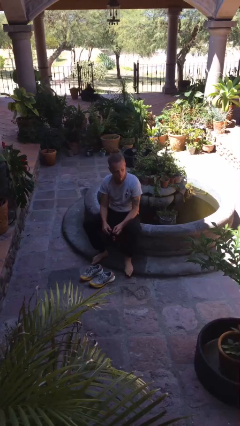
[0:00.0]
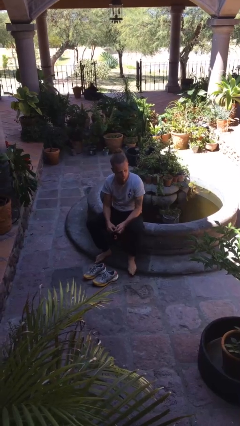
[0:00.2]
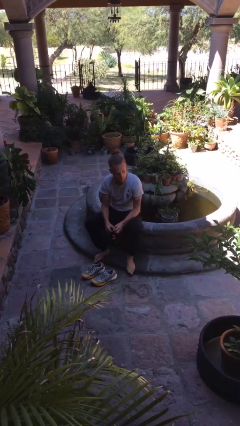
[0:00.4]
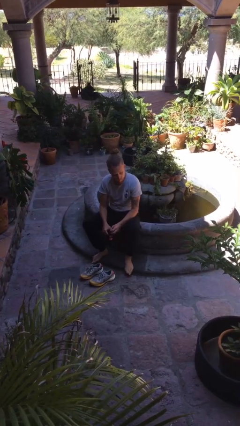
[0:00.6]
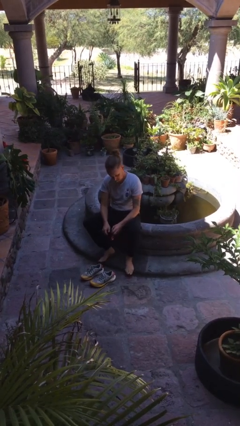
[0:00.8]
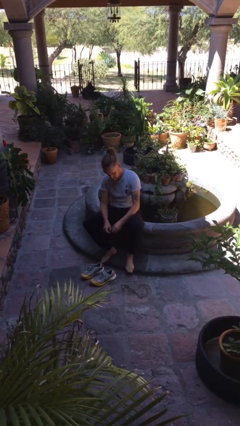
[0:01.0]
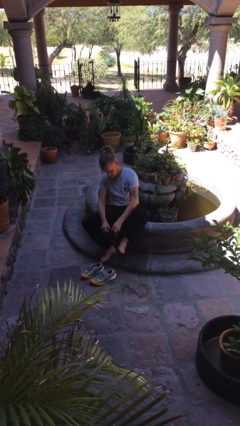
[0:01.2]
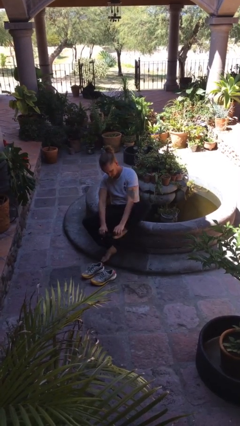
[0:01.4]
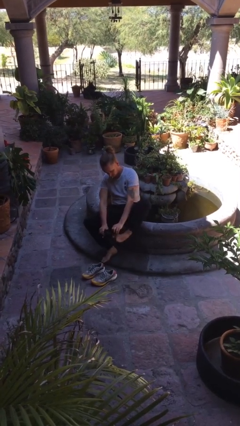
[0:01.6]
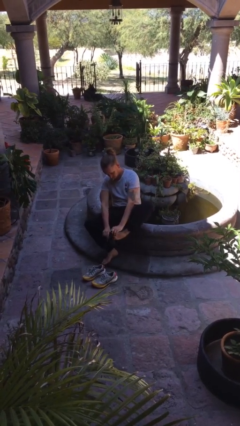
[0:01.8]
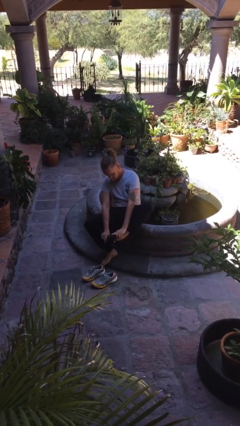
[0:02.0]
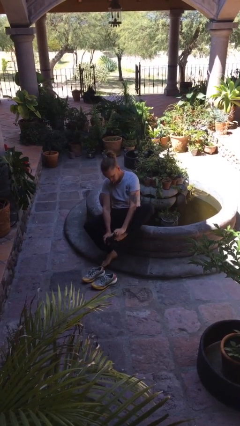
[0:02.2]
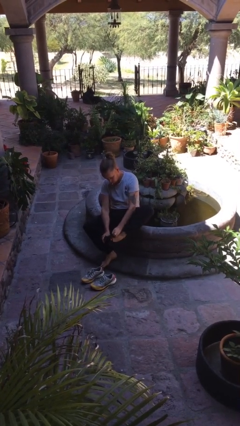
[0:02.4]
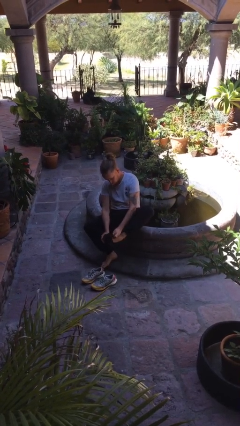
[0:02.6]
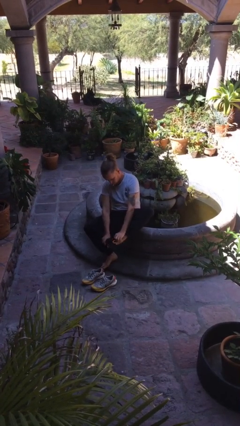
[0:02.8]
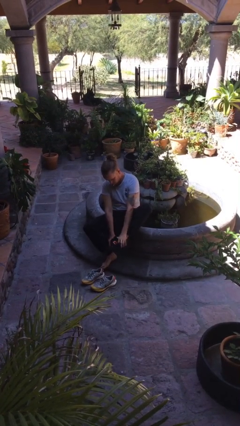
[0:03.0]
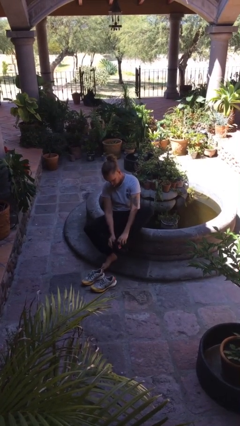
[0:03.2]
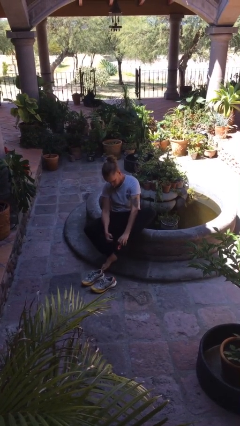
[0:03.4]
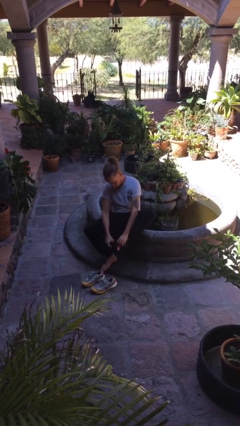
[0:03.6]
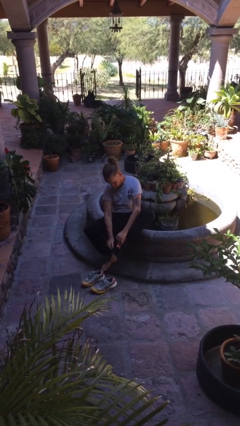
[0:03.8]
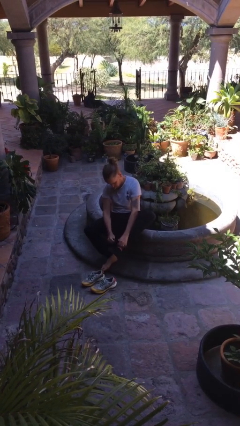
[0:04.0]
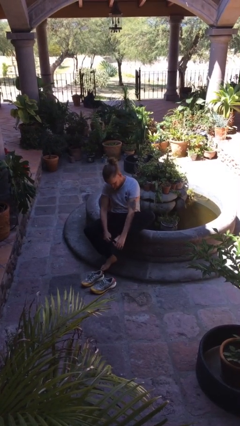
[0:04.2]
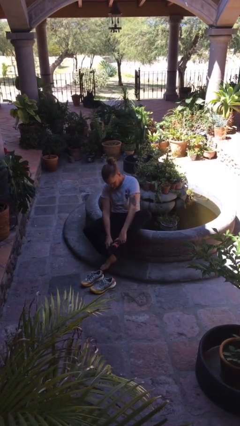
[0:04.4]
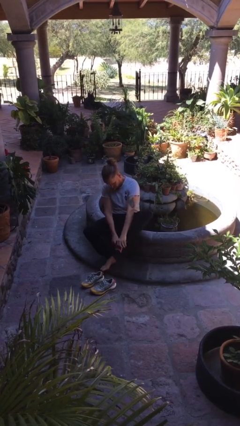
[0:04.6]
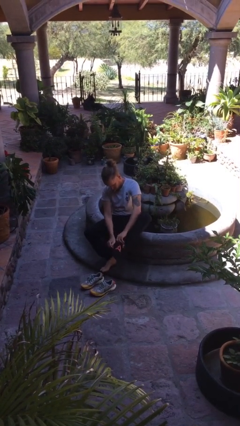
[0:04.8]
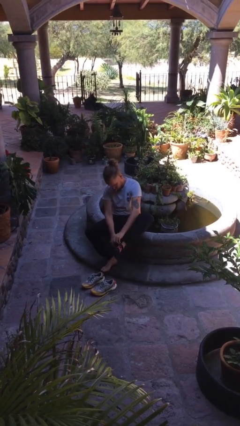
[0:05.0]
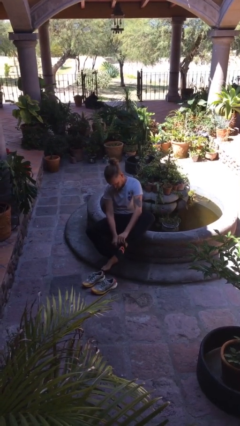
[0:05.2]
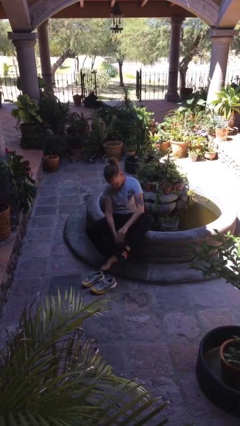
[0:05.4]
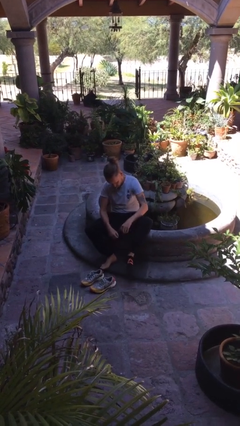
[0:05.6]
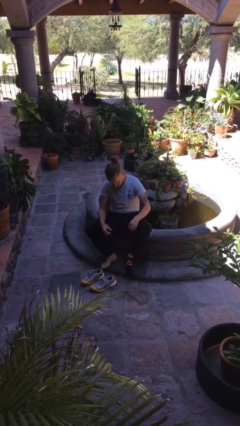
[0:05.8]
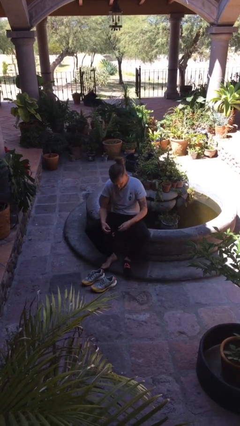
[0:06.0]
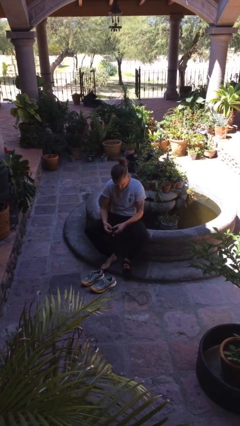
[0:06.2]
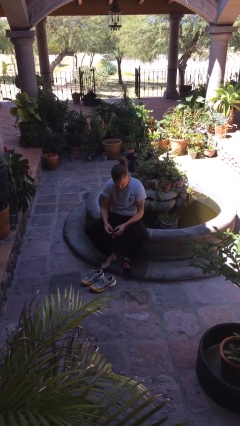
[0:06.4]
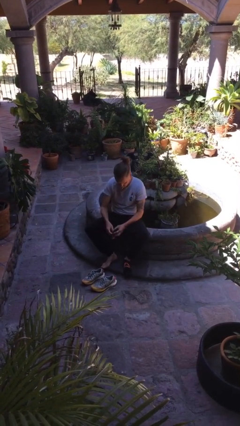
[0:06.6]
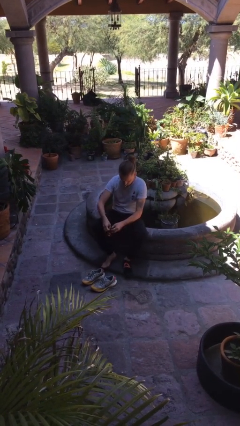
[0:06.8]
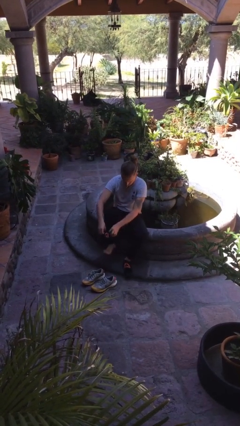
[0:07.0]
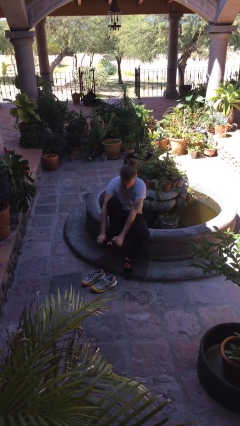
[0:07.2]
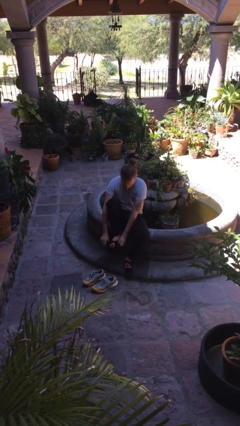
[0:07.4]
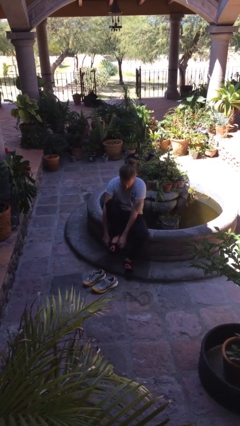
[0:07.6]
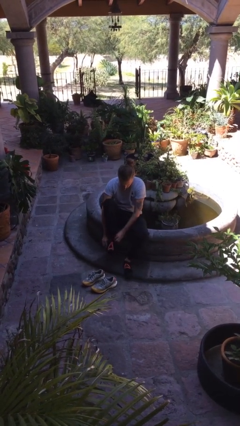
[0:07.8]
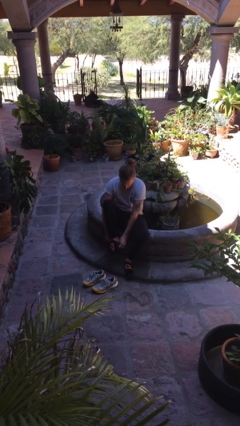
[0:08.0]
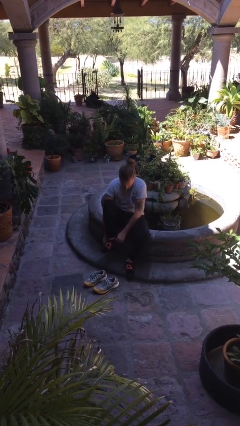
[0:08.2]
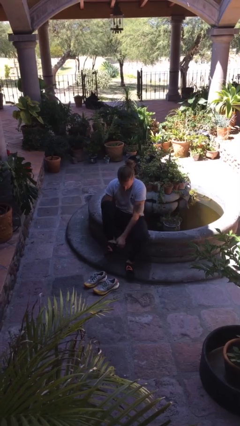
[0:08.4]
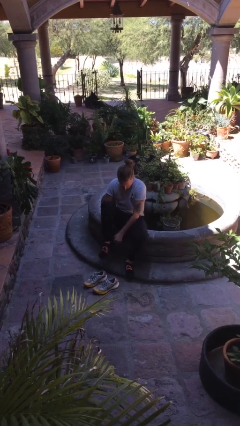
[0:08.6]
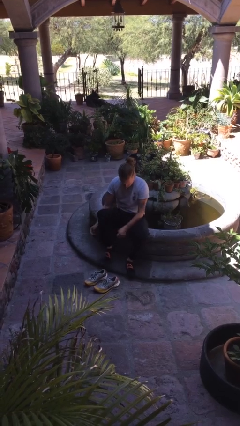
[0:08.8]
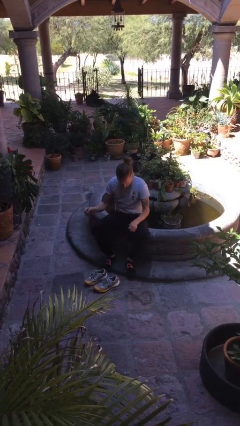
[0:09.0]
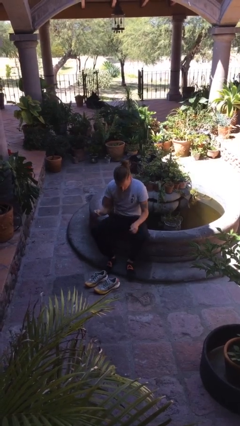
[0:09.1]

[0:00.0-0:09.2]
person puts on socks

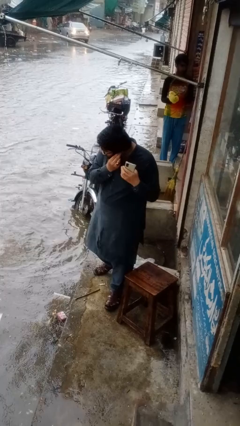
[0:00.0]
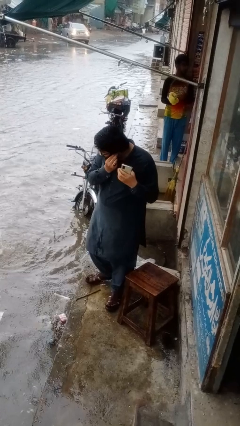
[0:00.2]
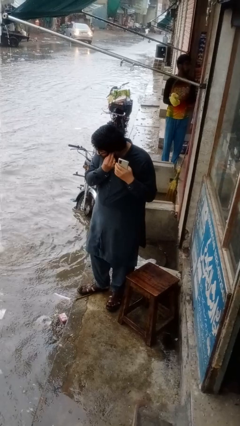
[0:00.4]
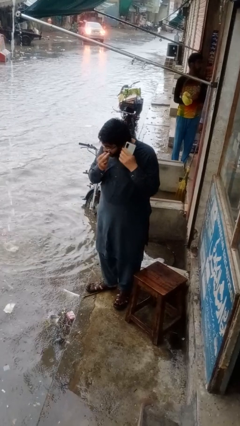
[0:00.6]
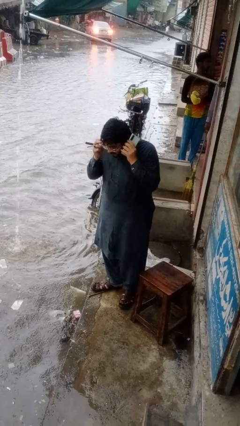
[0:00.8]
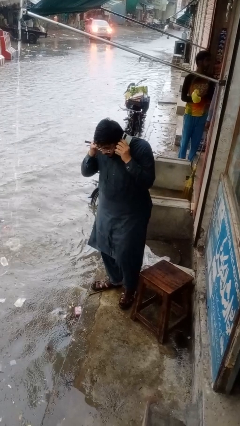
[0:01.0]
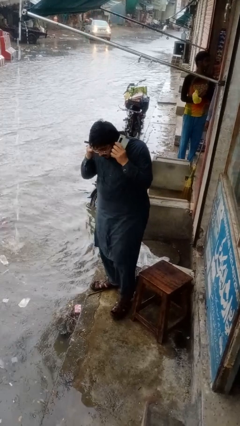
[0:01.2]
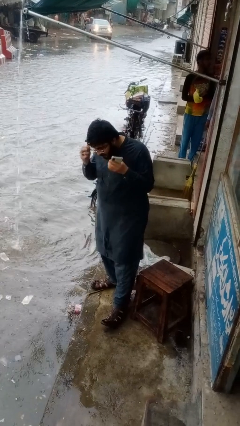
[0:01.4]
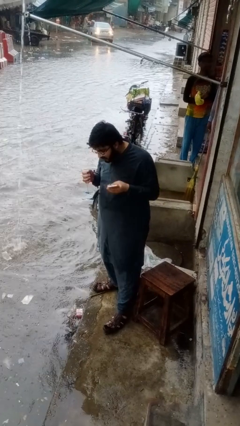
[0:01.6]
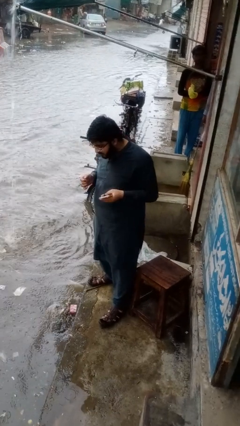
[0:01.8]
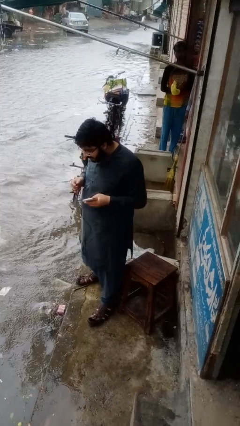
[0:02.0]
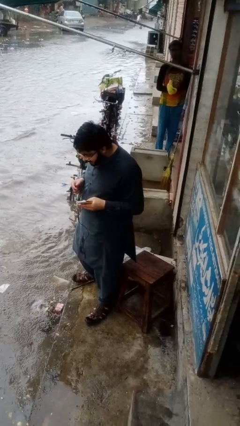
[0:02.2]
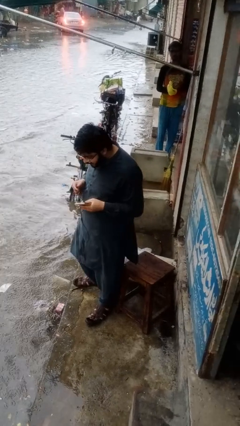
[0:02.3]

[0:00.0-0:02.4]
person takes off headphones

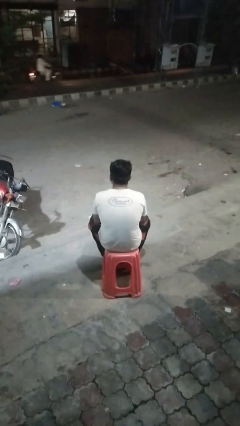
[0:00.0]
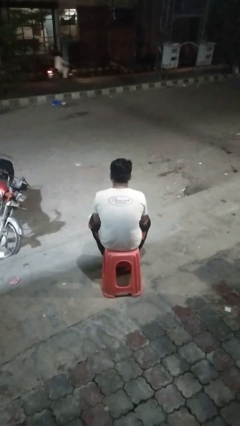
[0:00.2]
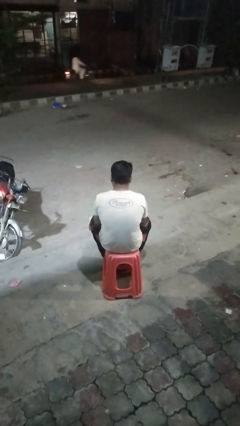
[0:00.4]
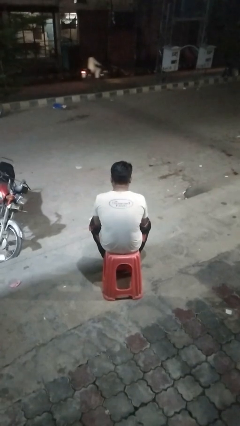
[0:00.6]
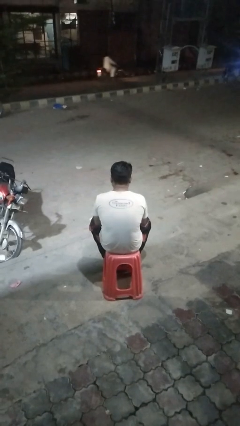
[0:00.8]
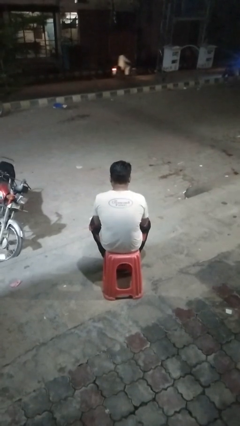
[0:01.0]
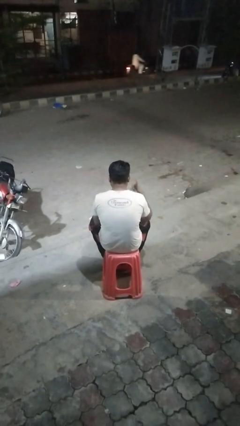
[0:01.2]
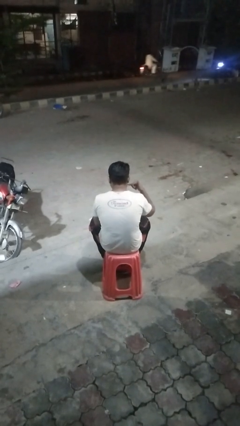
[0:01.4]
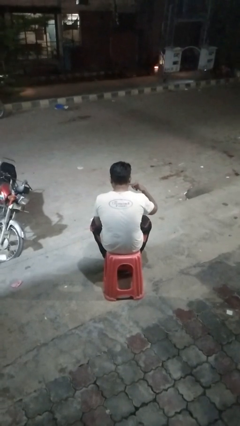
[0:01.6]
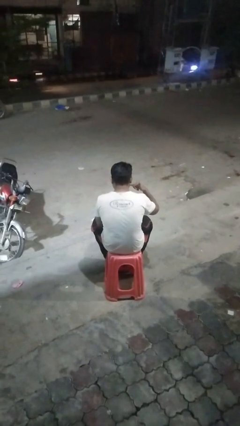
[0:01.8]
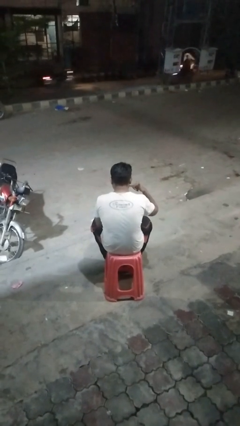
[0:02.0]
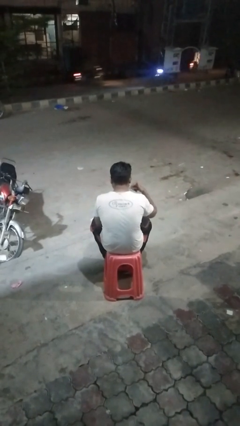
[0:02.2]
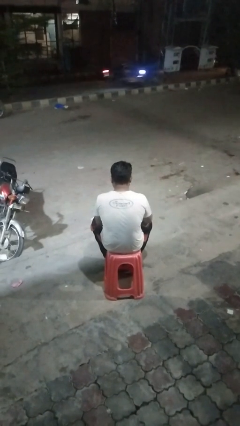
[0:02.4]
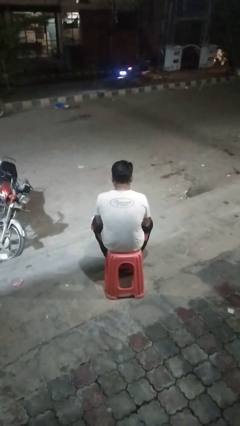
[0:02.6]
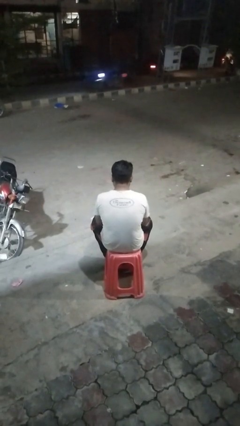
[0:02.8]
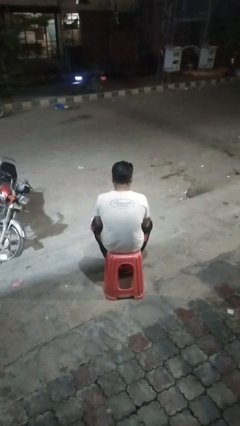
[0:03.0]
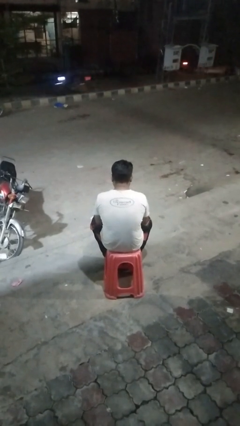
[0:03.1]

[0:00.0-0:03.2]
person gestures call me

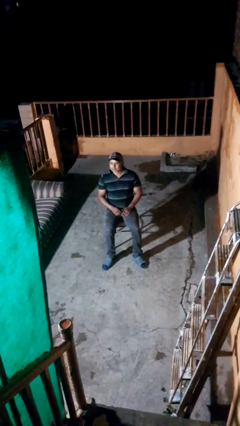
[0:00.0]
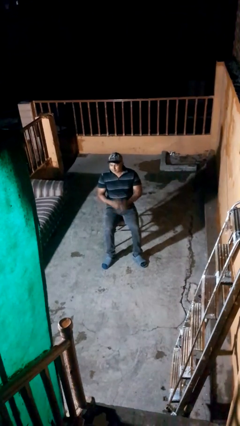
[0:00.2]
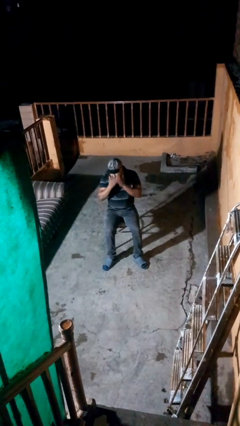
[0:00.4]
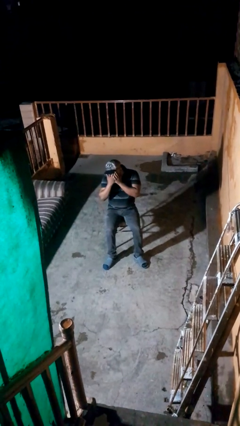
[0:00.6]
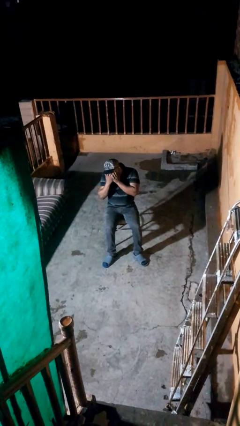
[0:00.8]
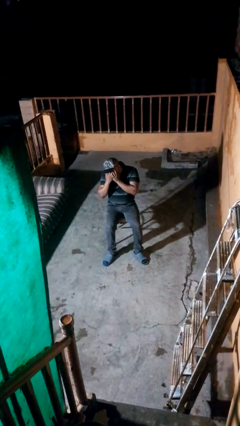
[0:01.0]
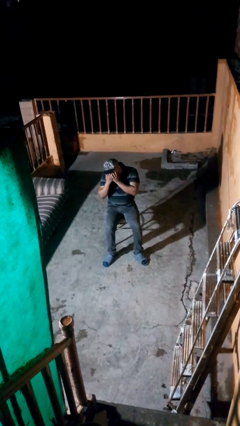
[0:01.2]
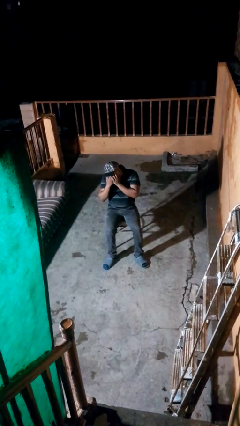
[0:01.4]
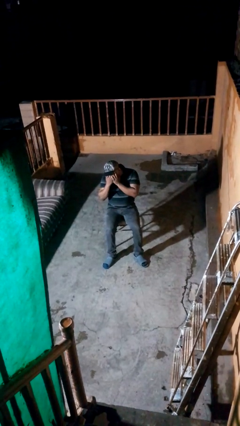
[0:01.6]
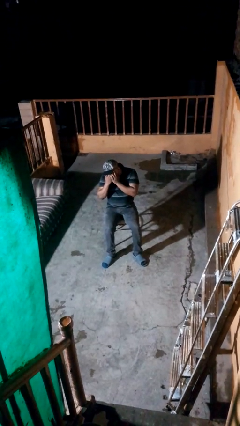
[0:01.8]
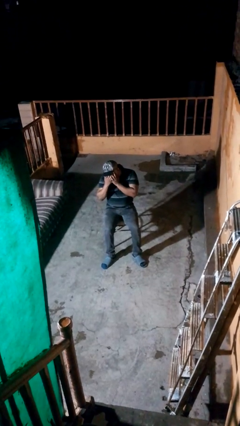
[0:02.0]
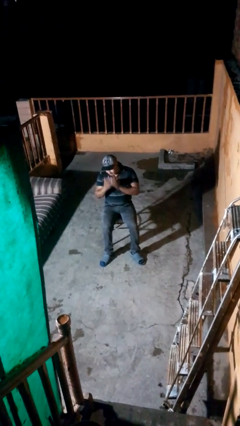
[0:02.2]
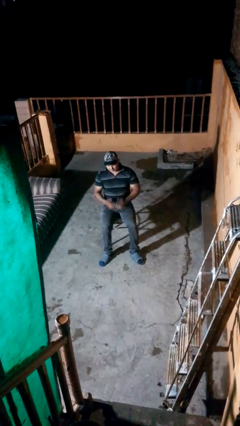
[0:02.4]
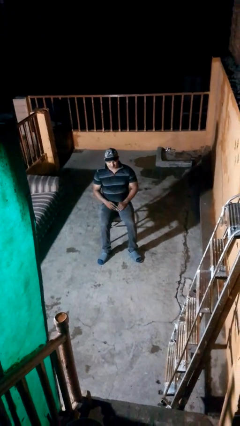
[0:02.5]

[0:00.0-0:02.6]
person covers face with hands

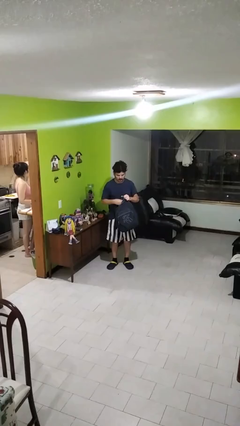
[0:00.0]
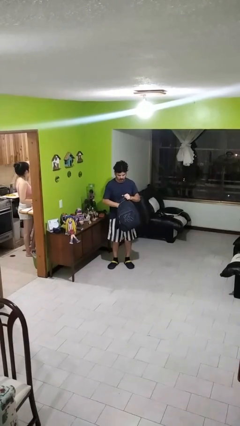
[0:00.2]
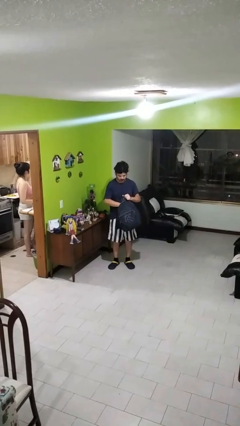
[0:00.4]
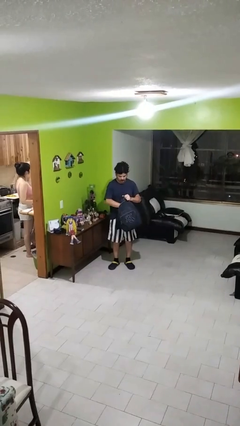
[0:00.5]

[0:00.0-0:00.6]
person searches in purse
